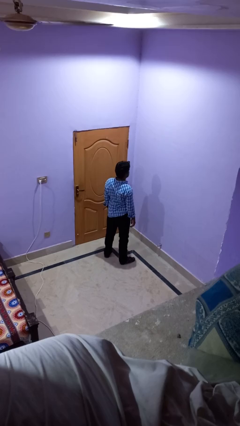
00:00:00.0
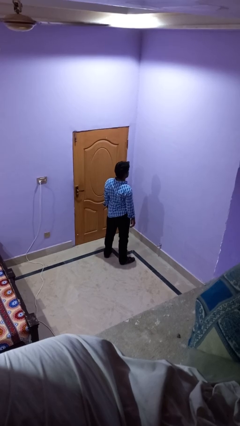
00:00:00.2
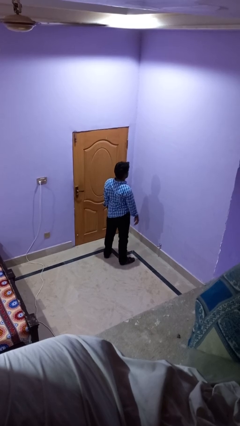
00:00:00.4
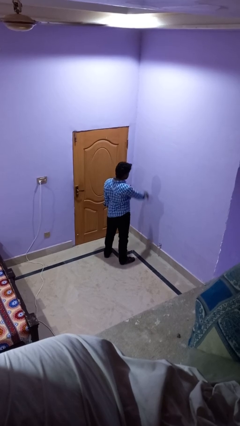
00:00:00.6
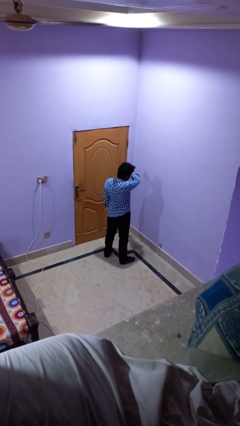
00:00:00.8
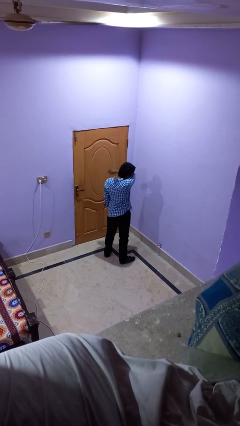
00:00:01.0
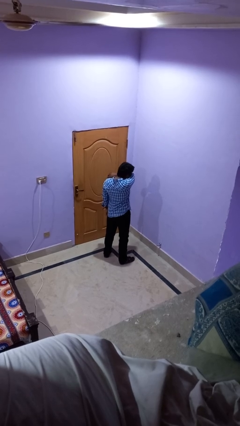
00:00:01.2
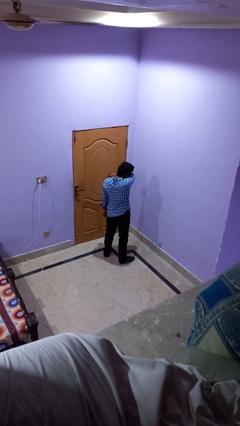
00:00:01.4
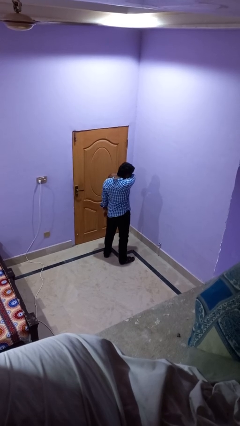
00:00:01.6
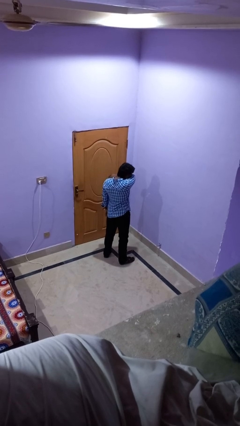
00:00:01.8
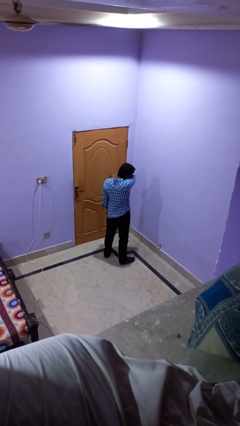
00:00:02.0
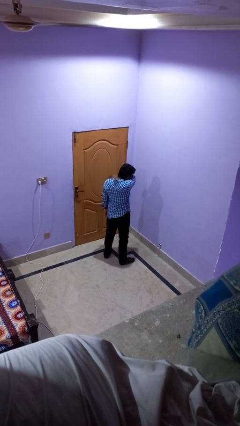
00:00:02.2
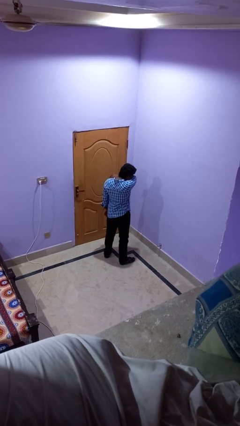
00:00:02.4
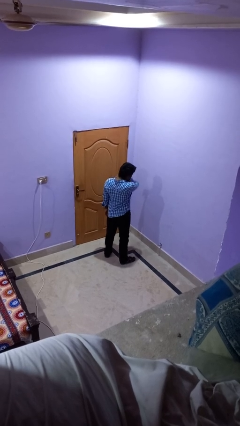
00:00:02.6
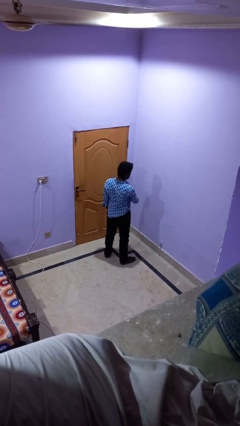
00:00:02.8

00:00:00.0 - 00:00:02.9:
person sneezes into arm

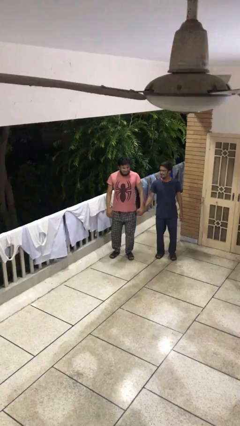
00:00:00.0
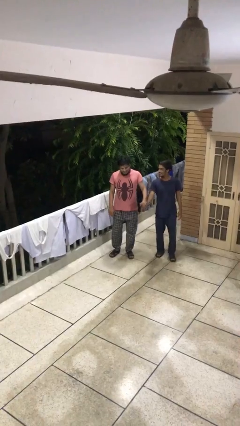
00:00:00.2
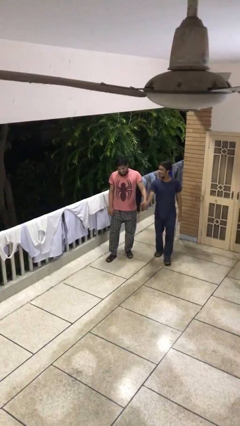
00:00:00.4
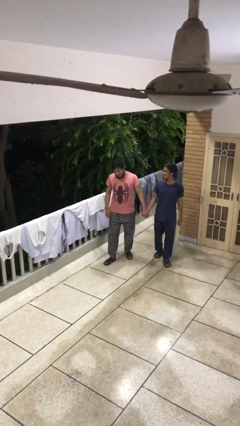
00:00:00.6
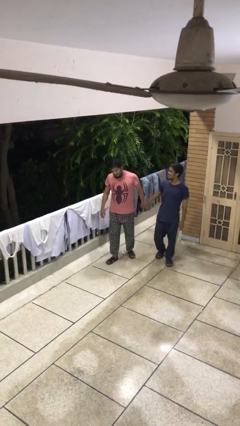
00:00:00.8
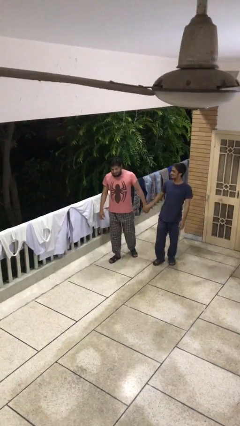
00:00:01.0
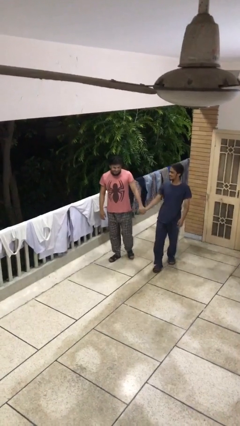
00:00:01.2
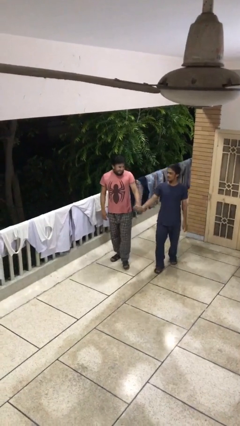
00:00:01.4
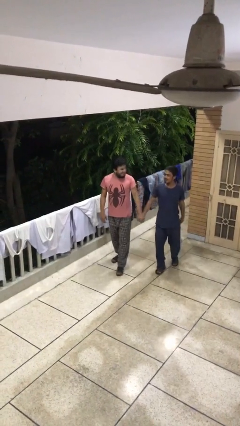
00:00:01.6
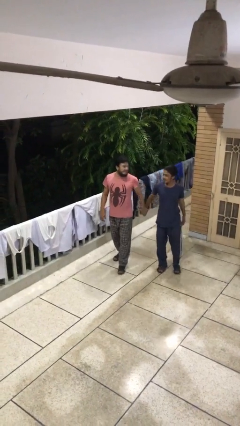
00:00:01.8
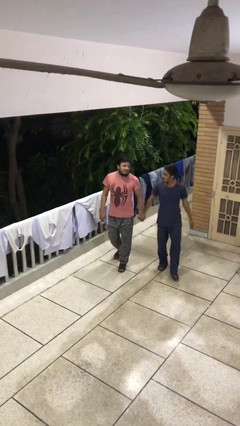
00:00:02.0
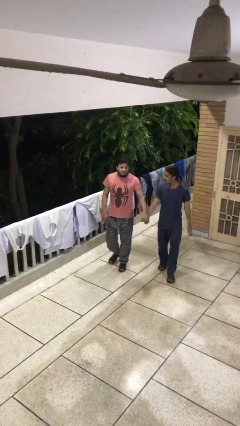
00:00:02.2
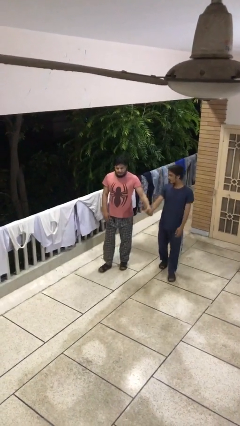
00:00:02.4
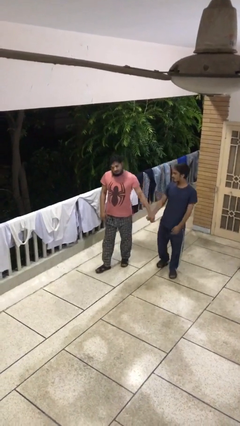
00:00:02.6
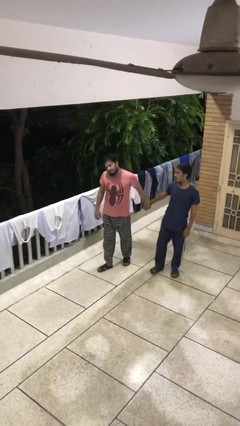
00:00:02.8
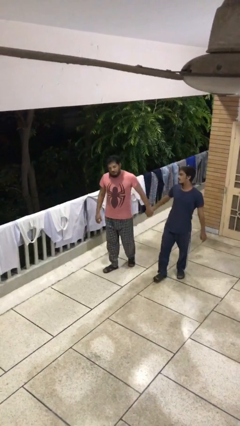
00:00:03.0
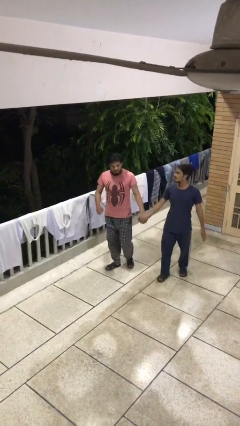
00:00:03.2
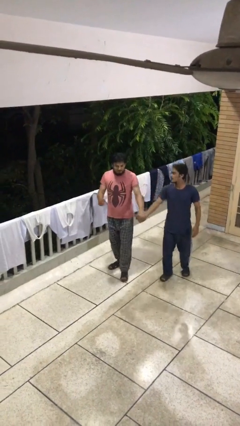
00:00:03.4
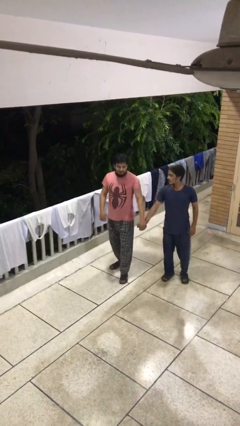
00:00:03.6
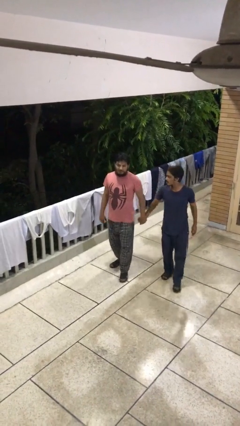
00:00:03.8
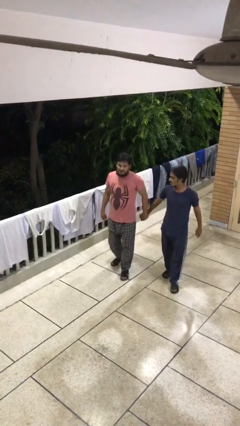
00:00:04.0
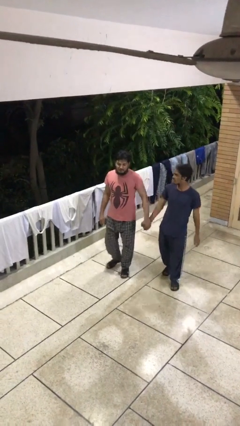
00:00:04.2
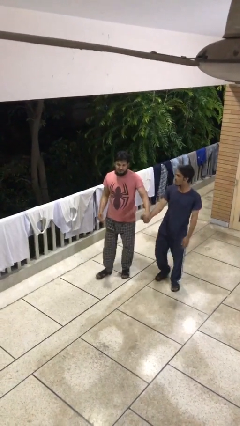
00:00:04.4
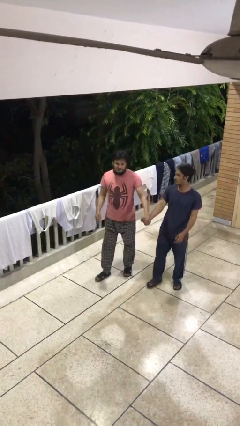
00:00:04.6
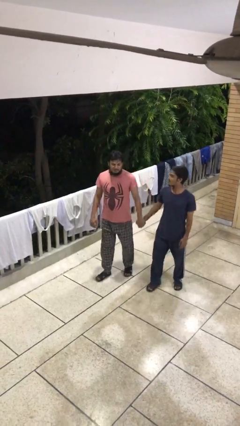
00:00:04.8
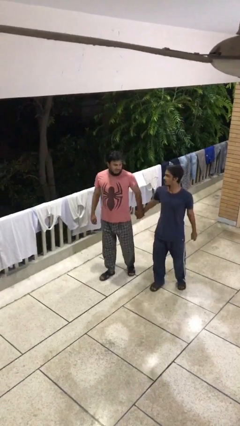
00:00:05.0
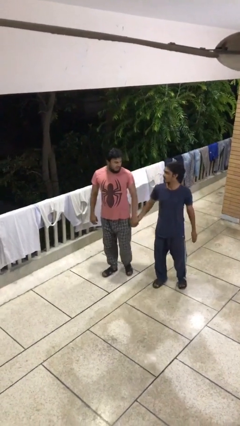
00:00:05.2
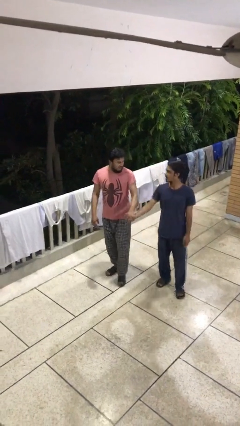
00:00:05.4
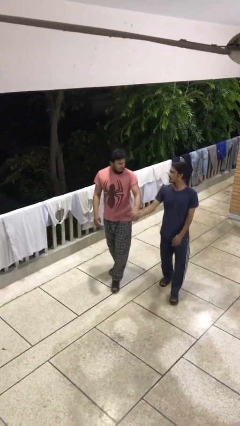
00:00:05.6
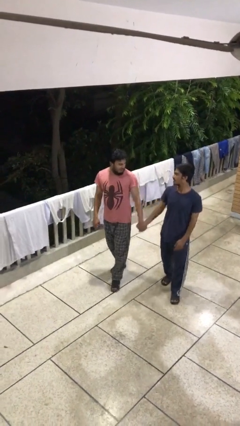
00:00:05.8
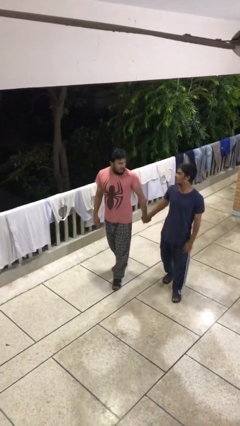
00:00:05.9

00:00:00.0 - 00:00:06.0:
person holds hand

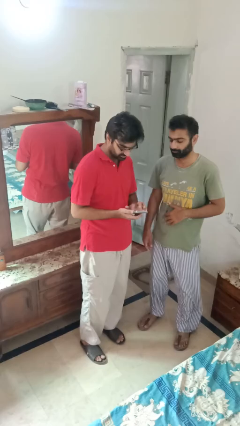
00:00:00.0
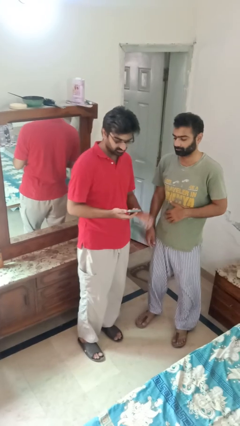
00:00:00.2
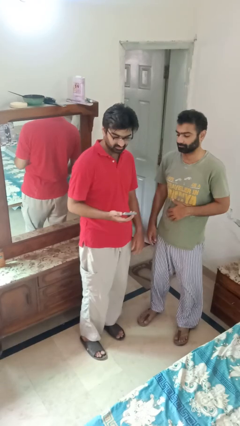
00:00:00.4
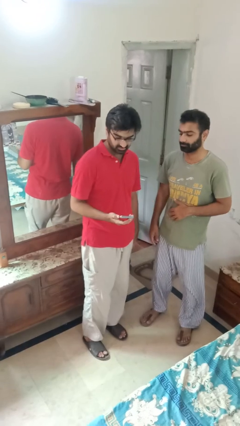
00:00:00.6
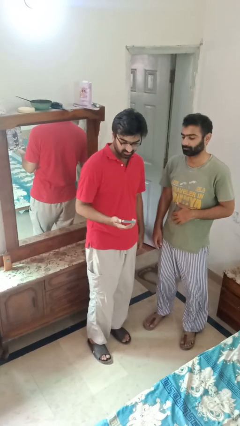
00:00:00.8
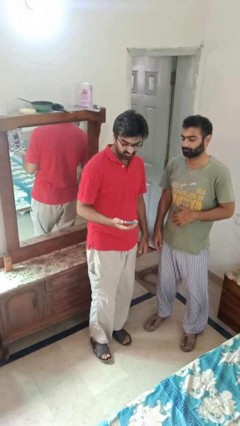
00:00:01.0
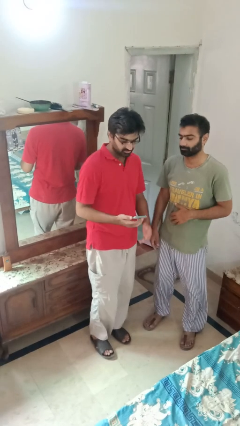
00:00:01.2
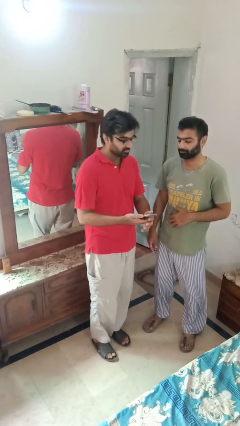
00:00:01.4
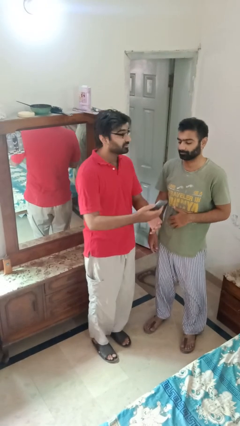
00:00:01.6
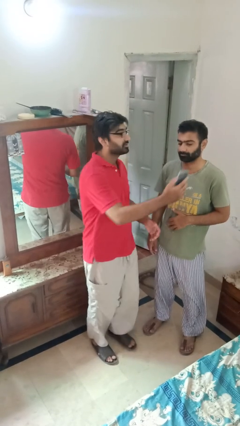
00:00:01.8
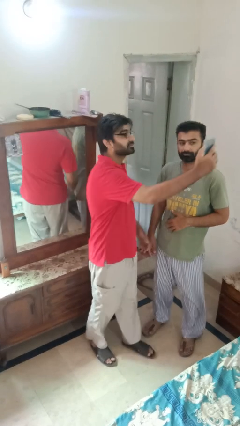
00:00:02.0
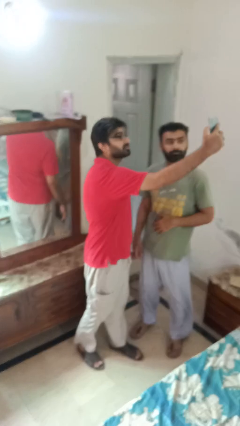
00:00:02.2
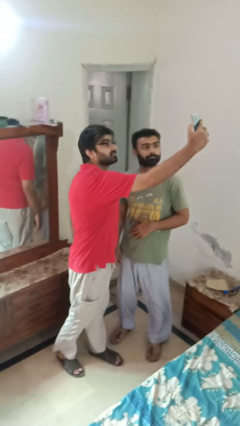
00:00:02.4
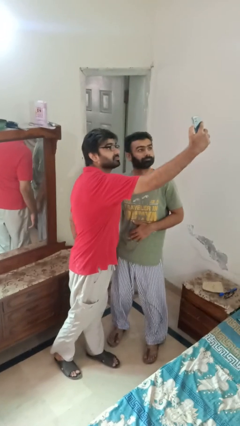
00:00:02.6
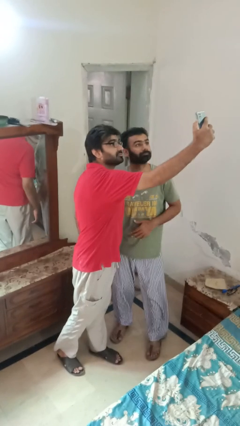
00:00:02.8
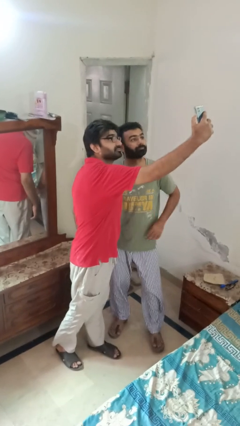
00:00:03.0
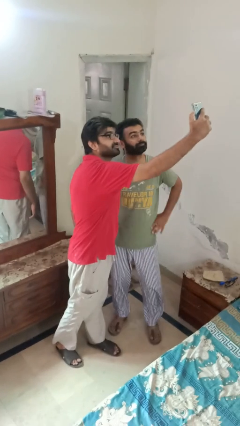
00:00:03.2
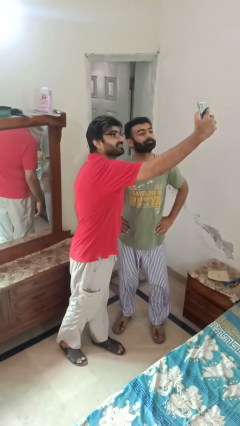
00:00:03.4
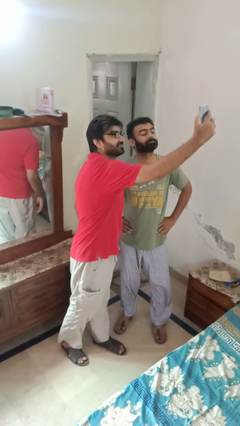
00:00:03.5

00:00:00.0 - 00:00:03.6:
person takes selfie with person

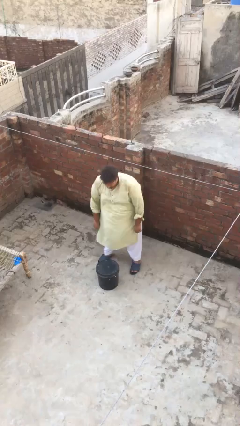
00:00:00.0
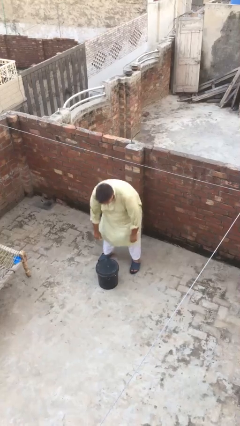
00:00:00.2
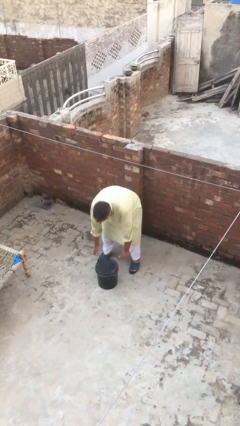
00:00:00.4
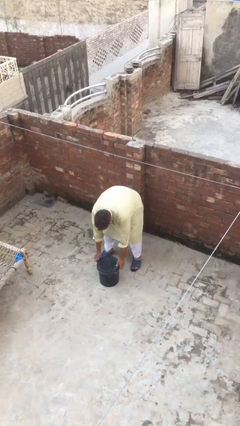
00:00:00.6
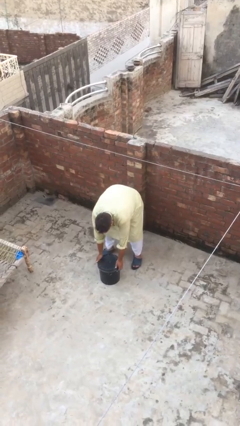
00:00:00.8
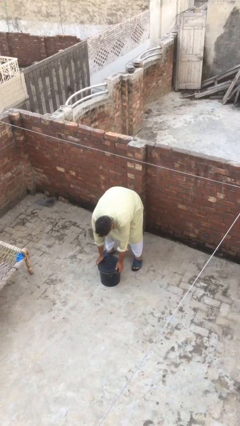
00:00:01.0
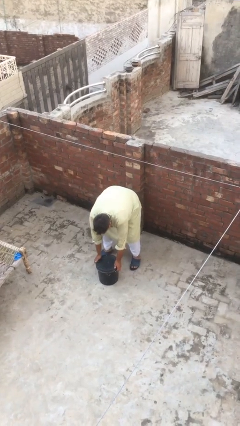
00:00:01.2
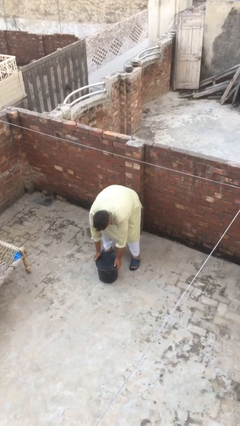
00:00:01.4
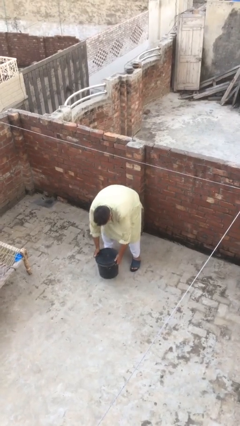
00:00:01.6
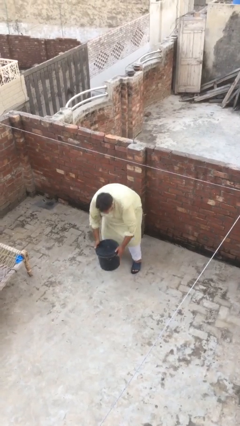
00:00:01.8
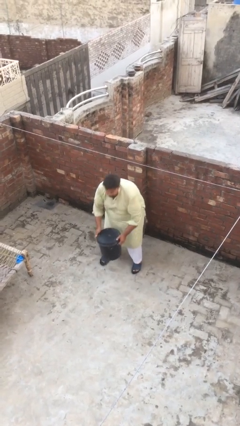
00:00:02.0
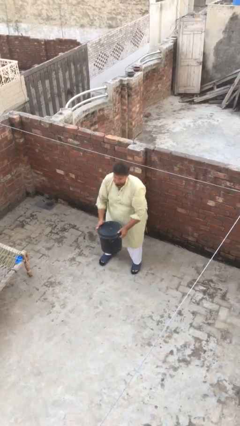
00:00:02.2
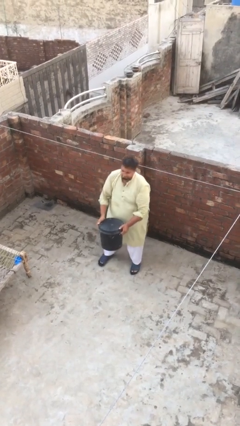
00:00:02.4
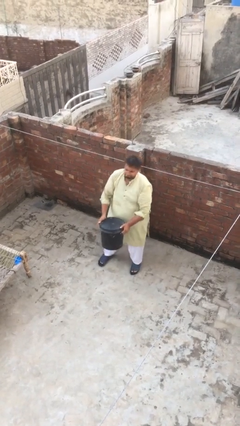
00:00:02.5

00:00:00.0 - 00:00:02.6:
person picks up object from floor

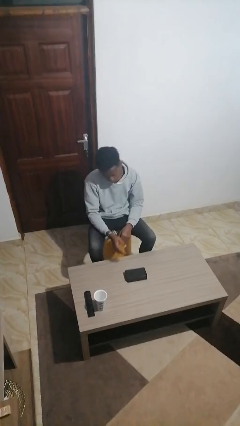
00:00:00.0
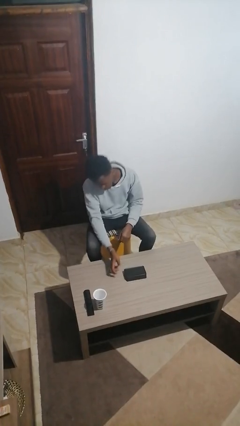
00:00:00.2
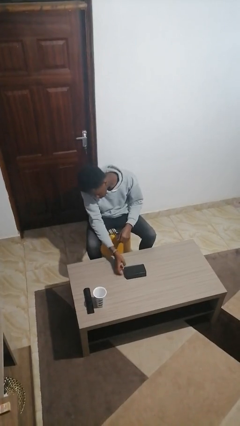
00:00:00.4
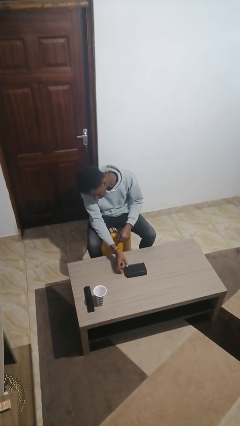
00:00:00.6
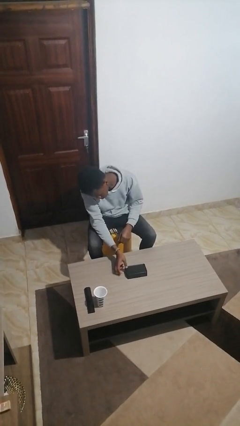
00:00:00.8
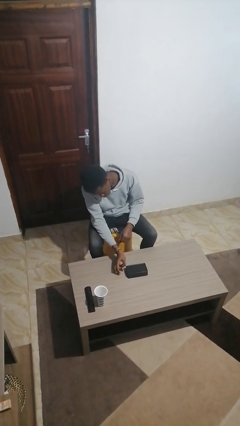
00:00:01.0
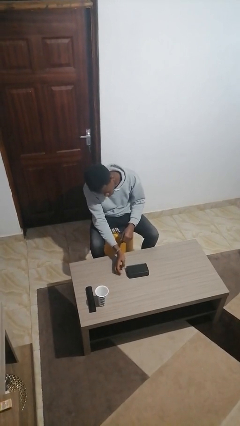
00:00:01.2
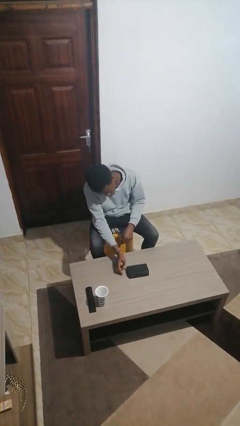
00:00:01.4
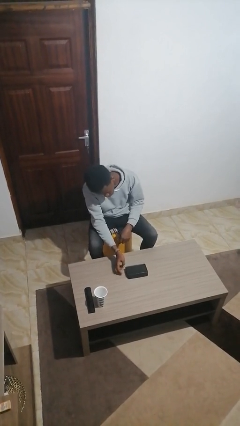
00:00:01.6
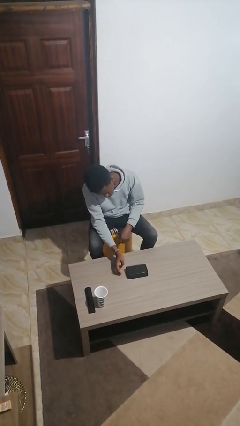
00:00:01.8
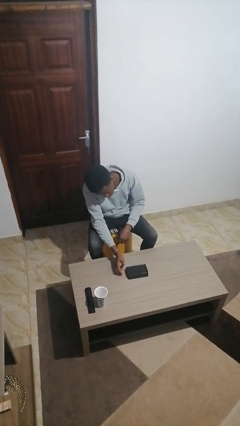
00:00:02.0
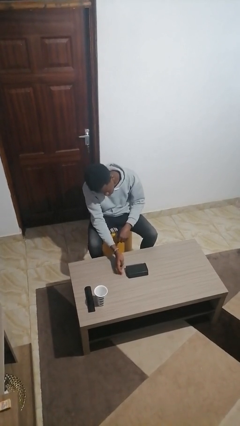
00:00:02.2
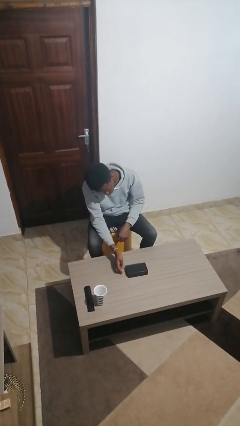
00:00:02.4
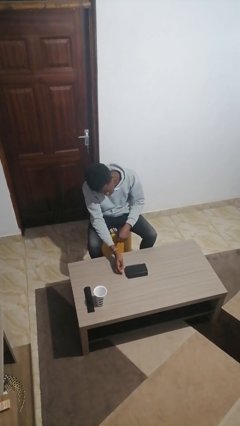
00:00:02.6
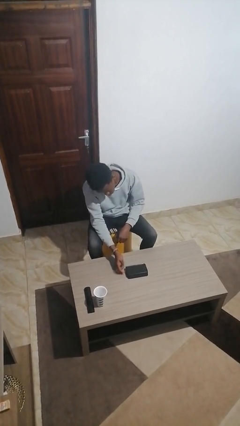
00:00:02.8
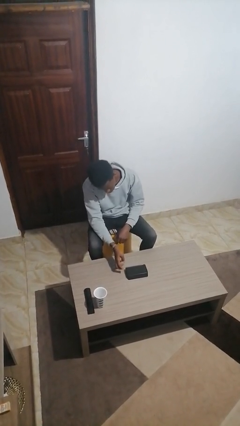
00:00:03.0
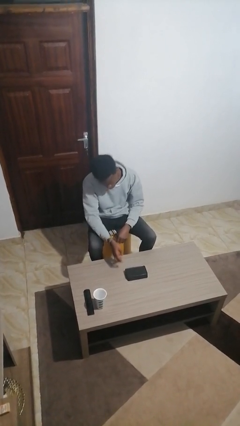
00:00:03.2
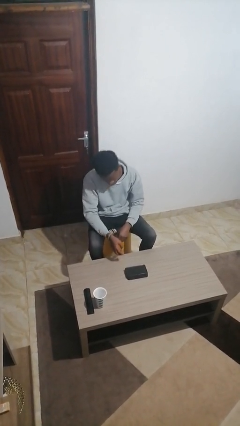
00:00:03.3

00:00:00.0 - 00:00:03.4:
person taps object with finger
